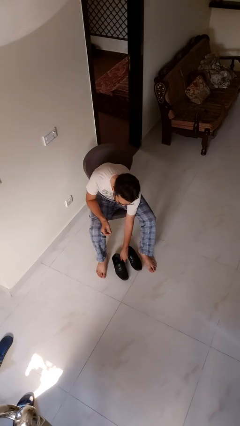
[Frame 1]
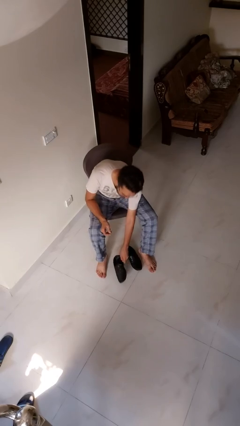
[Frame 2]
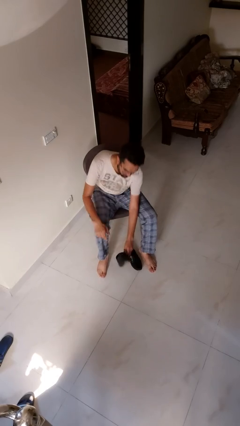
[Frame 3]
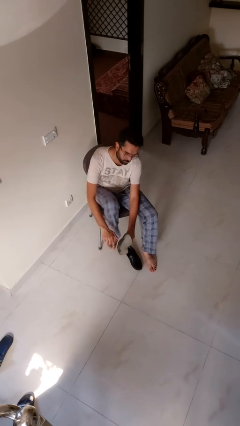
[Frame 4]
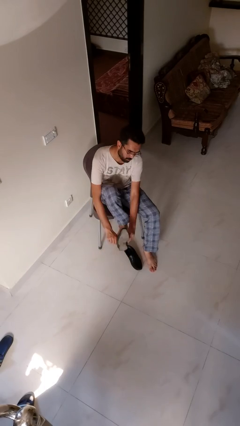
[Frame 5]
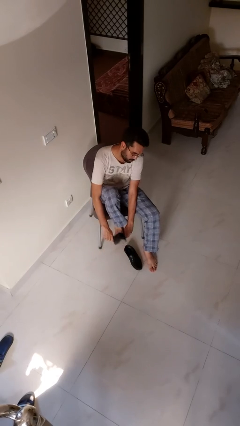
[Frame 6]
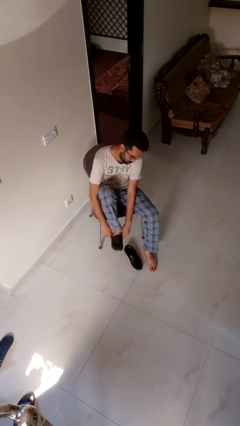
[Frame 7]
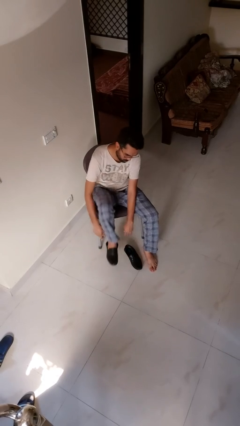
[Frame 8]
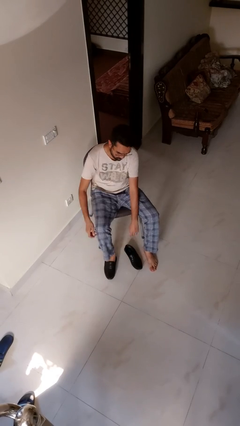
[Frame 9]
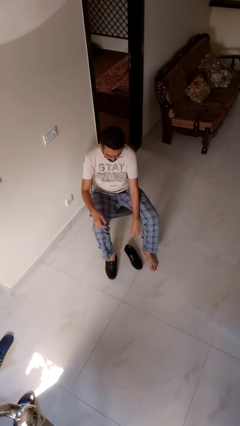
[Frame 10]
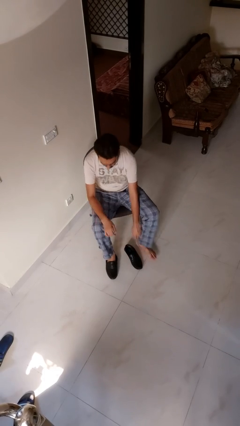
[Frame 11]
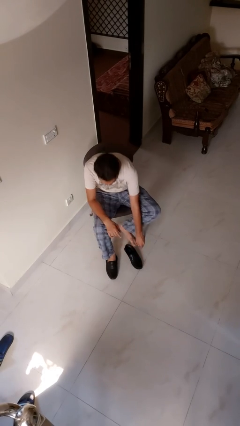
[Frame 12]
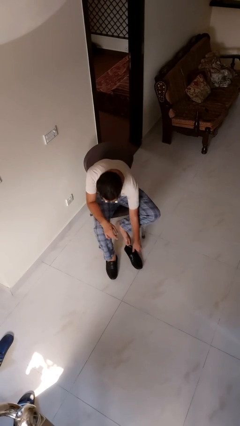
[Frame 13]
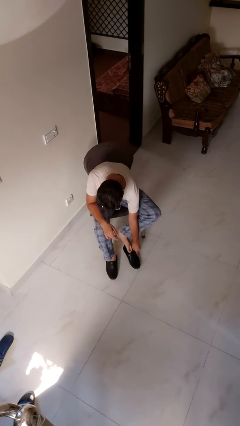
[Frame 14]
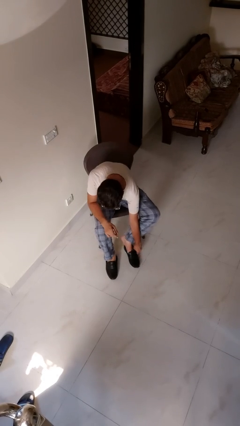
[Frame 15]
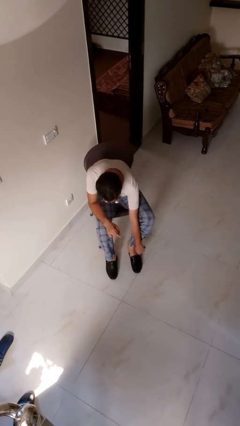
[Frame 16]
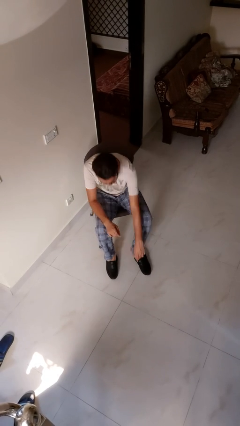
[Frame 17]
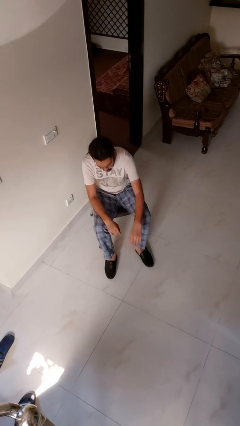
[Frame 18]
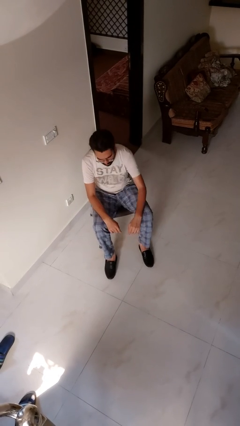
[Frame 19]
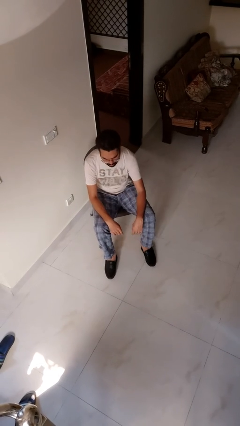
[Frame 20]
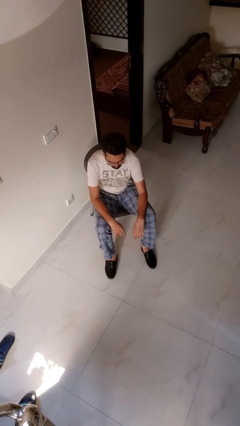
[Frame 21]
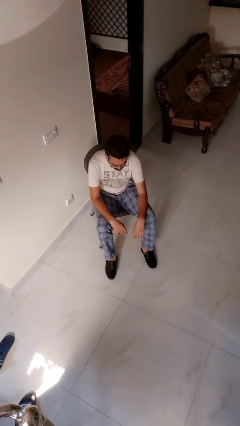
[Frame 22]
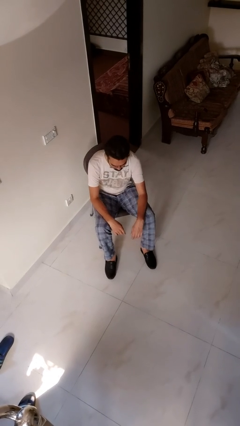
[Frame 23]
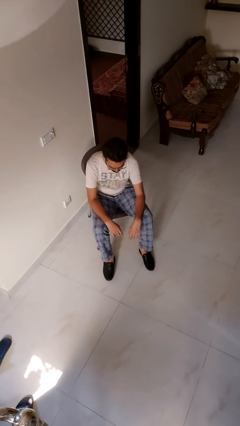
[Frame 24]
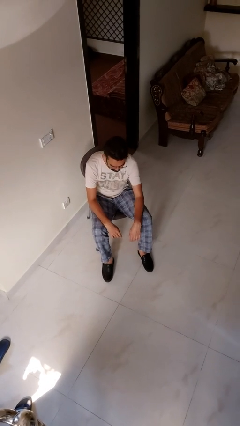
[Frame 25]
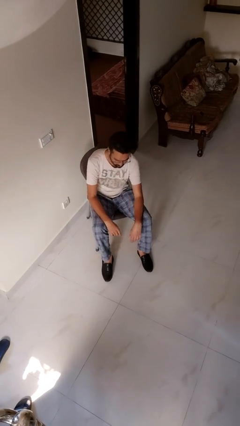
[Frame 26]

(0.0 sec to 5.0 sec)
person puts on boots

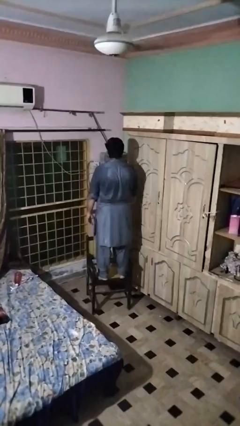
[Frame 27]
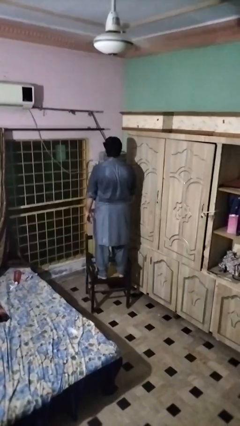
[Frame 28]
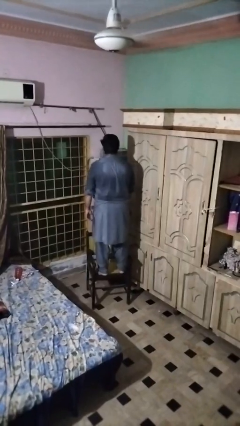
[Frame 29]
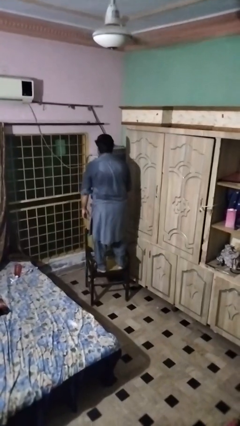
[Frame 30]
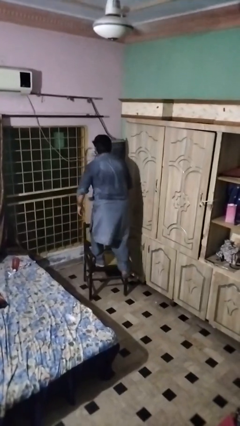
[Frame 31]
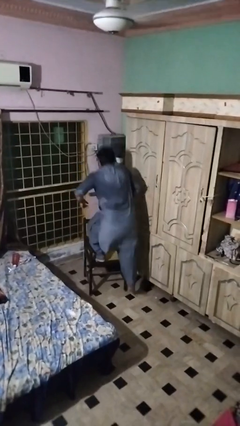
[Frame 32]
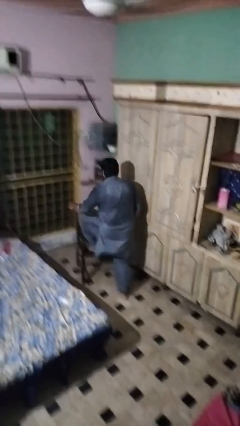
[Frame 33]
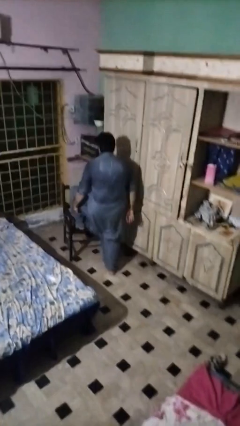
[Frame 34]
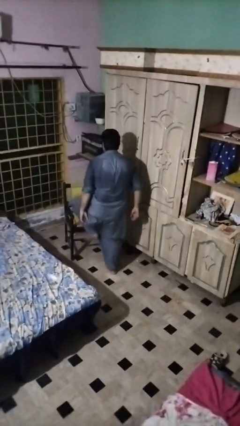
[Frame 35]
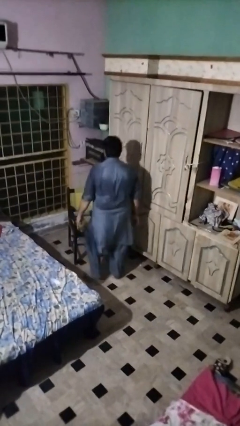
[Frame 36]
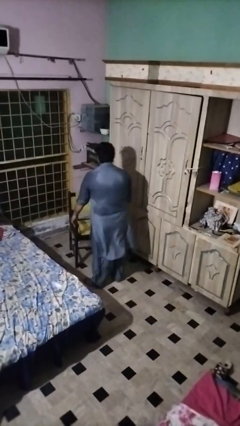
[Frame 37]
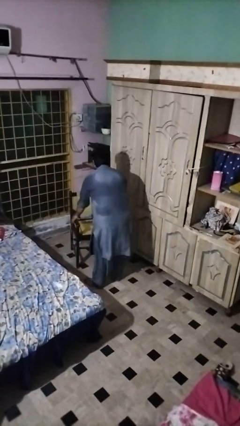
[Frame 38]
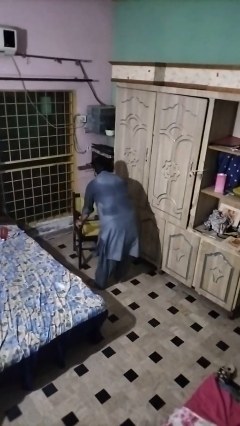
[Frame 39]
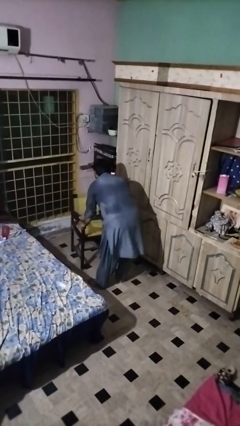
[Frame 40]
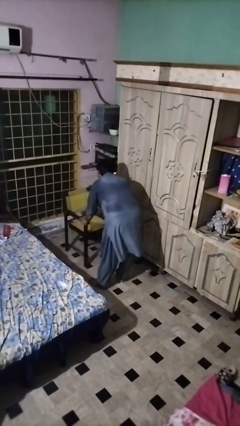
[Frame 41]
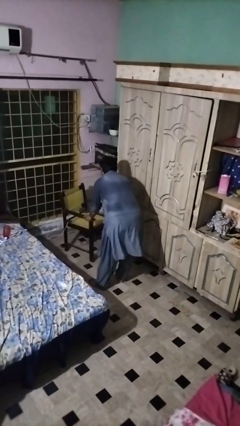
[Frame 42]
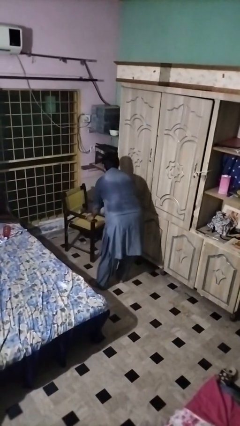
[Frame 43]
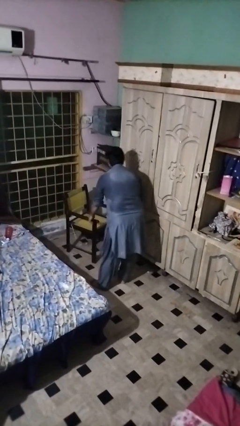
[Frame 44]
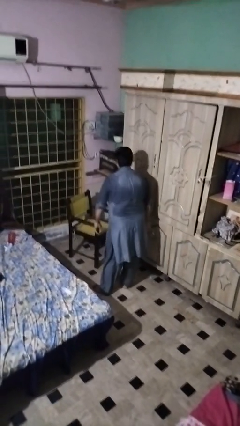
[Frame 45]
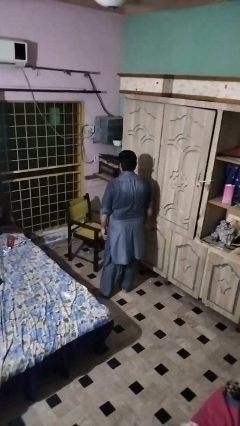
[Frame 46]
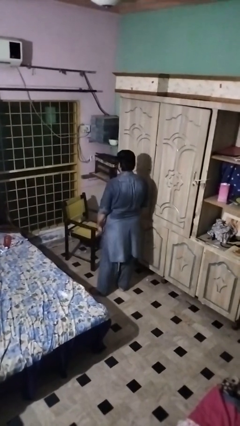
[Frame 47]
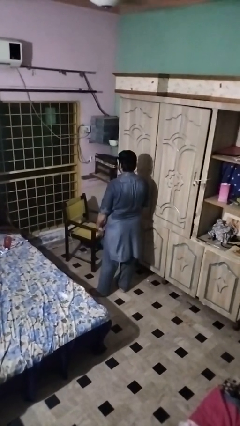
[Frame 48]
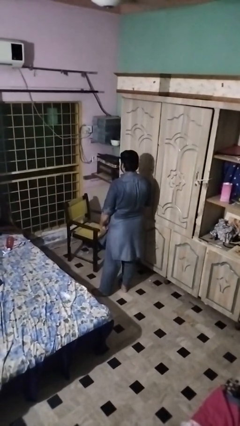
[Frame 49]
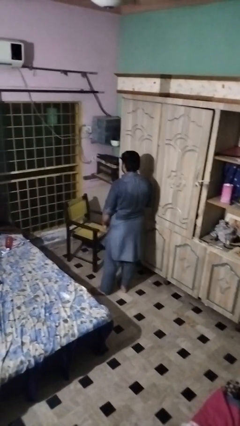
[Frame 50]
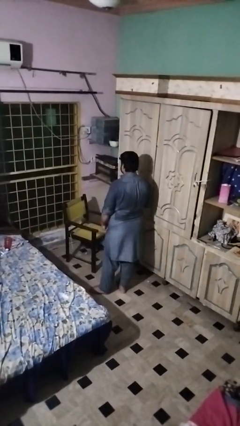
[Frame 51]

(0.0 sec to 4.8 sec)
person climbs off chair

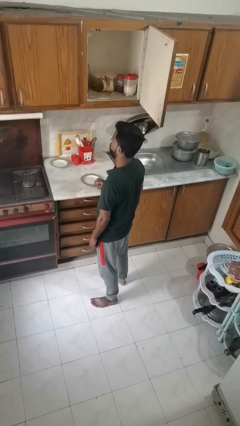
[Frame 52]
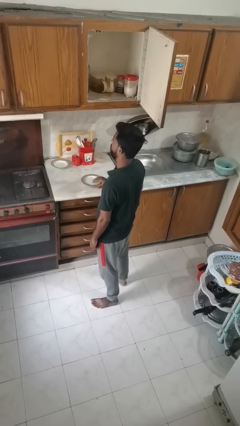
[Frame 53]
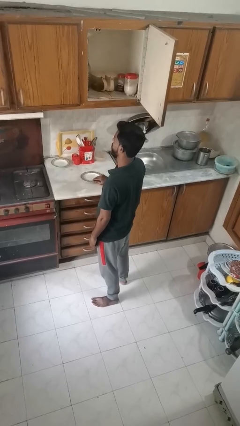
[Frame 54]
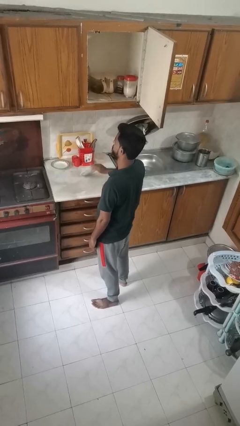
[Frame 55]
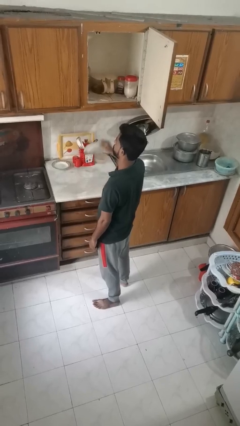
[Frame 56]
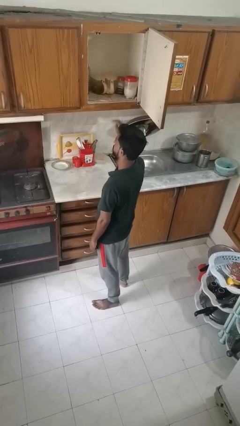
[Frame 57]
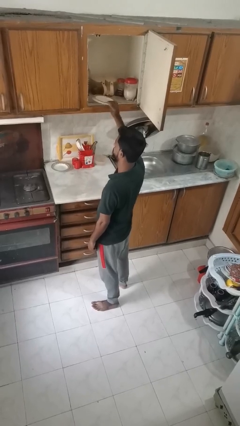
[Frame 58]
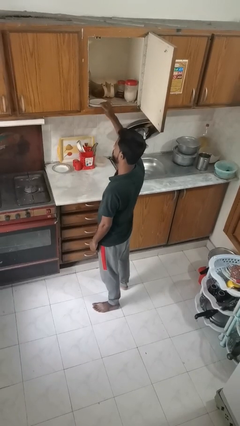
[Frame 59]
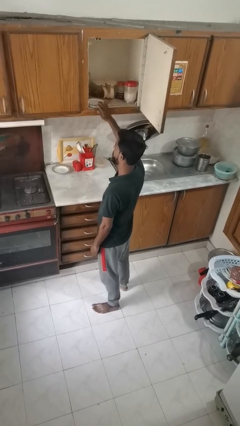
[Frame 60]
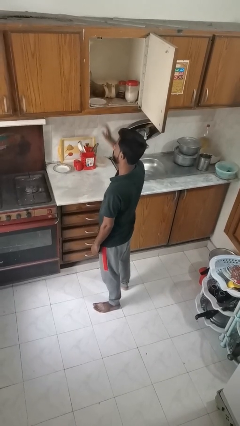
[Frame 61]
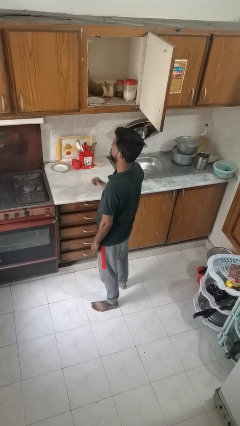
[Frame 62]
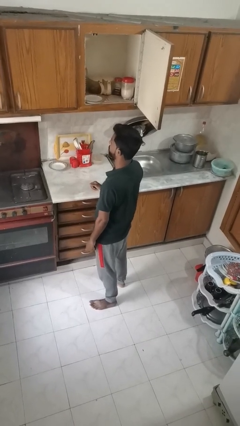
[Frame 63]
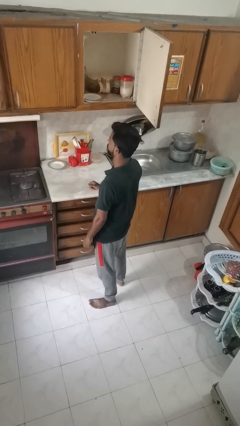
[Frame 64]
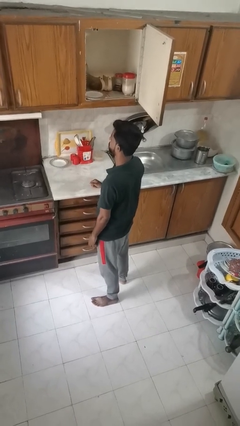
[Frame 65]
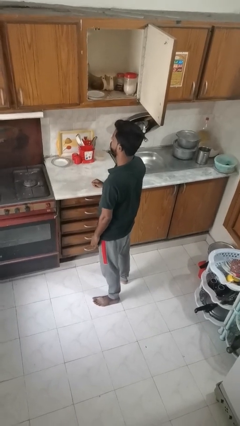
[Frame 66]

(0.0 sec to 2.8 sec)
person puts object in cabinet

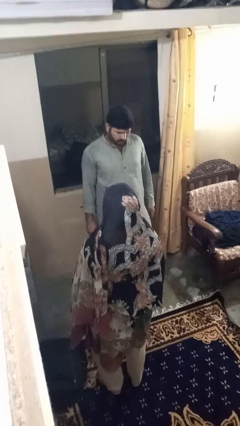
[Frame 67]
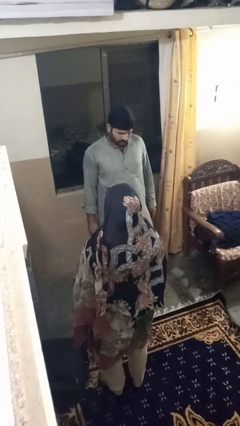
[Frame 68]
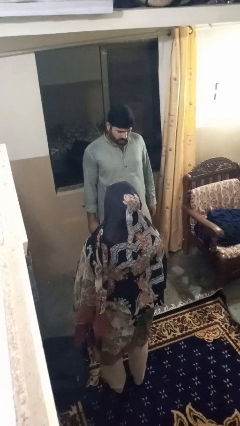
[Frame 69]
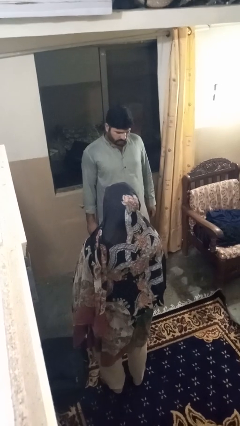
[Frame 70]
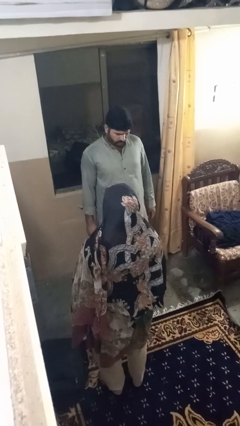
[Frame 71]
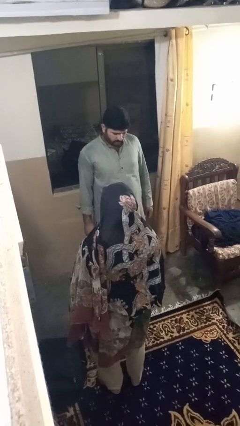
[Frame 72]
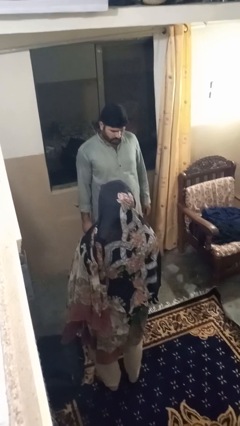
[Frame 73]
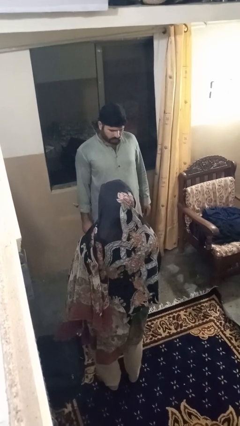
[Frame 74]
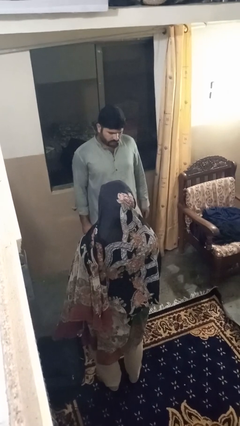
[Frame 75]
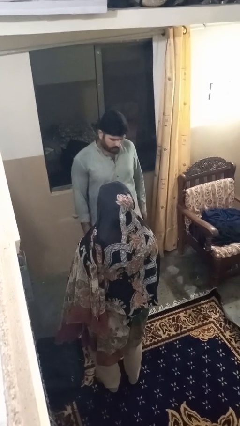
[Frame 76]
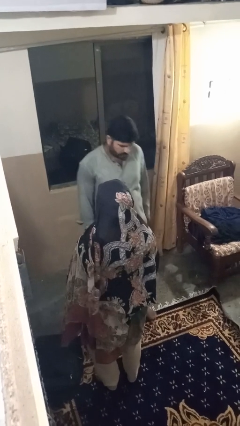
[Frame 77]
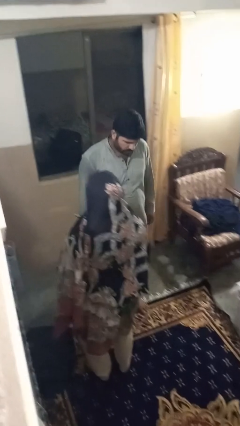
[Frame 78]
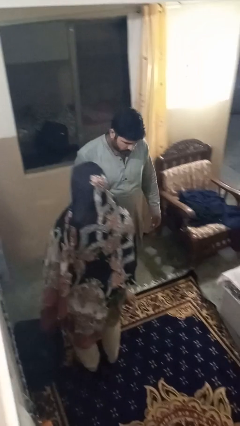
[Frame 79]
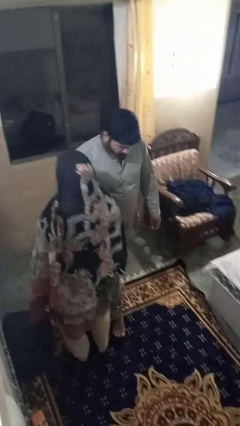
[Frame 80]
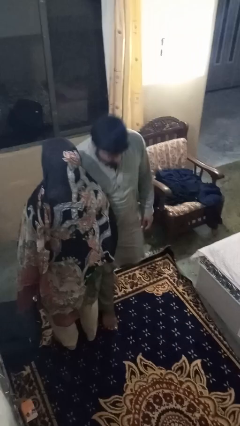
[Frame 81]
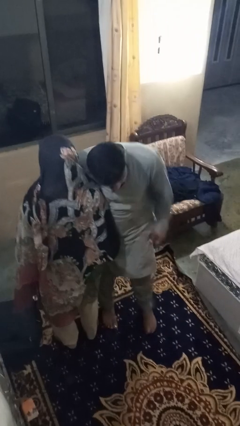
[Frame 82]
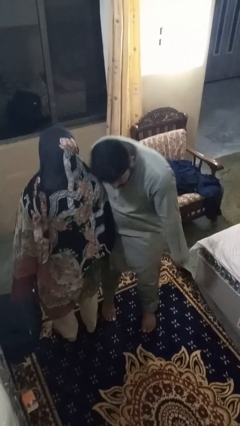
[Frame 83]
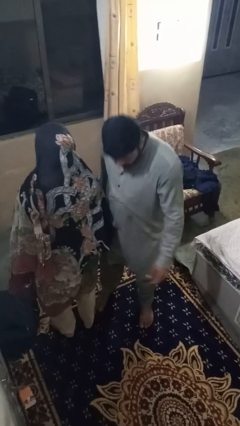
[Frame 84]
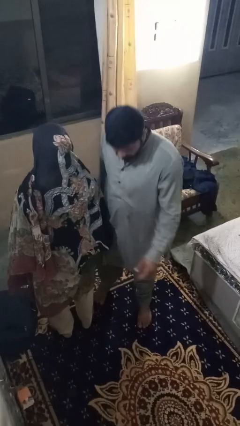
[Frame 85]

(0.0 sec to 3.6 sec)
person bumps into person

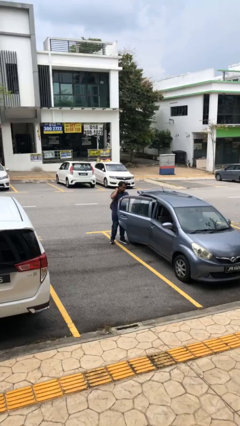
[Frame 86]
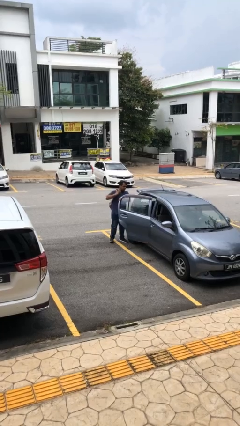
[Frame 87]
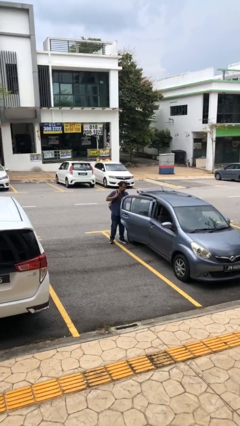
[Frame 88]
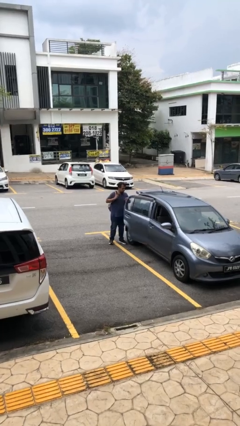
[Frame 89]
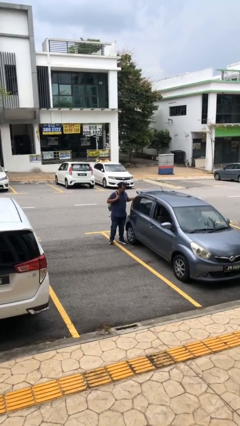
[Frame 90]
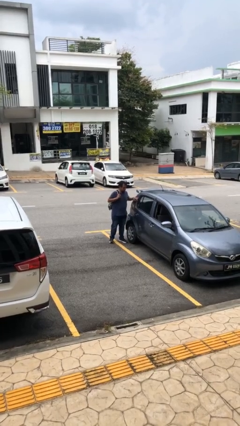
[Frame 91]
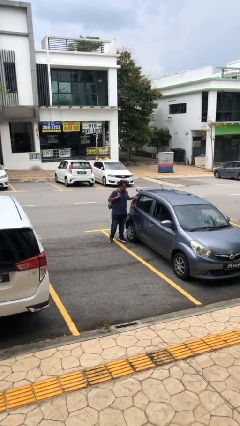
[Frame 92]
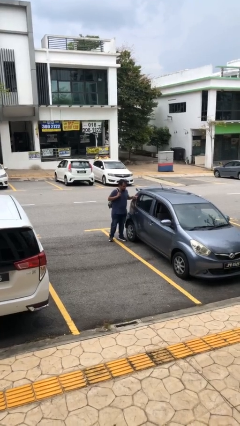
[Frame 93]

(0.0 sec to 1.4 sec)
person closes car door
